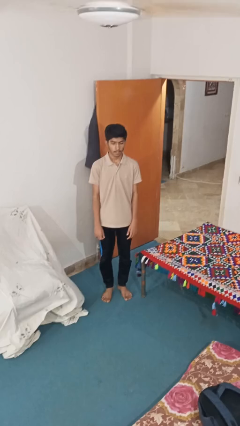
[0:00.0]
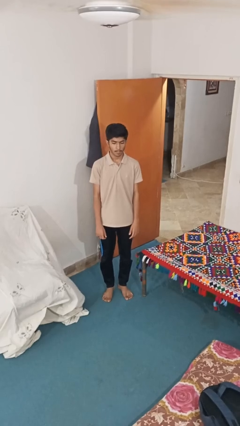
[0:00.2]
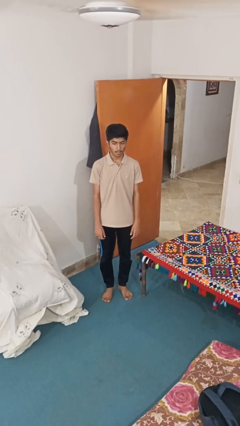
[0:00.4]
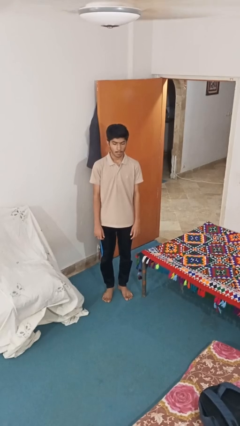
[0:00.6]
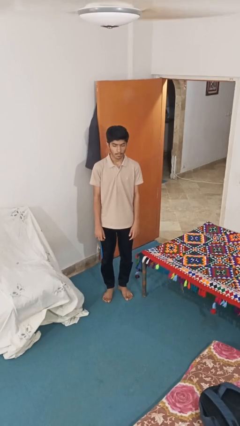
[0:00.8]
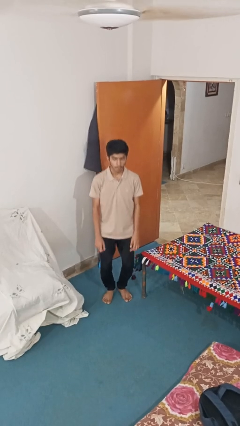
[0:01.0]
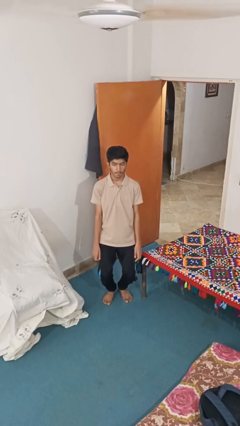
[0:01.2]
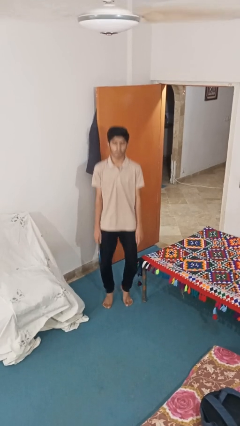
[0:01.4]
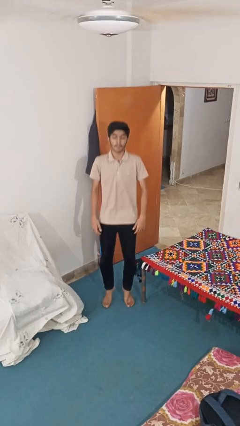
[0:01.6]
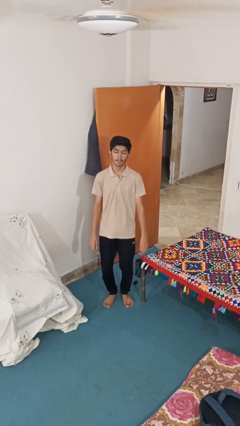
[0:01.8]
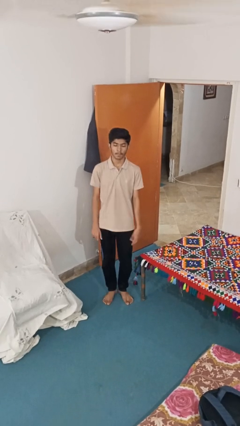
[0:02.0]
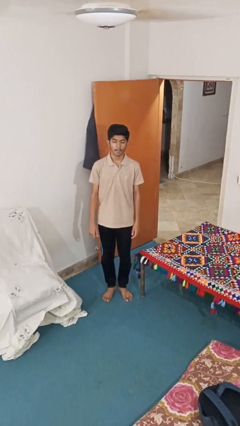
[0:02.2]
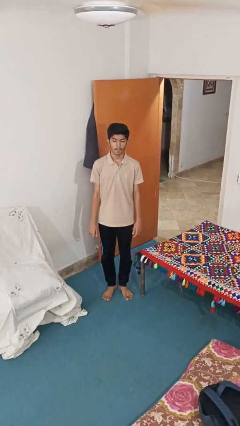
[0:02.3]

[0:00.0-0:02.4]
person jumps

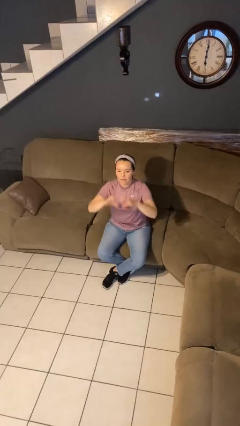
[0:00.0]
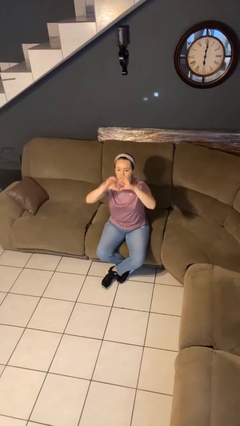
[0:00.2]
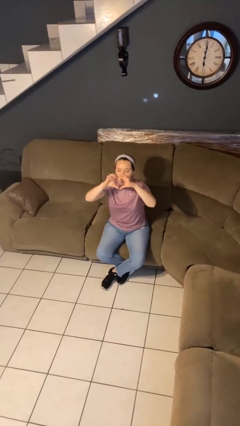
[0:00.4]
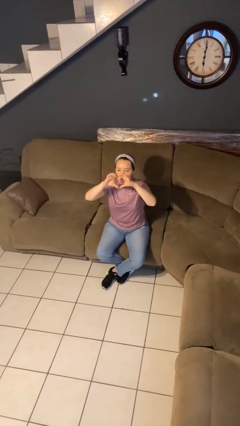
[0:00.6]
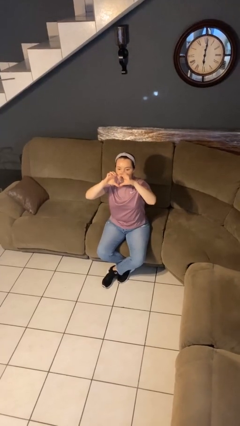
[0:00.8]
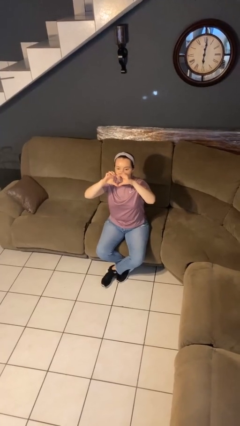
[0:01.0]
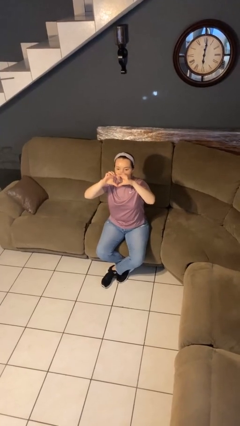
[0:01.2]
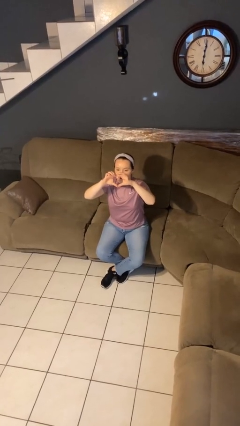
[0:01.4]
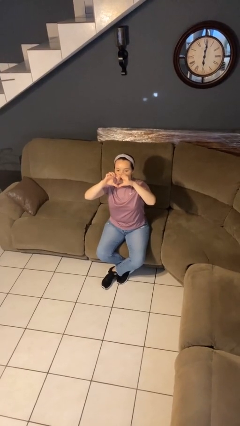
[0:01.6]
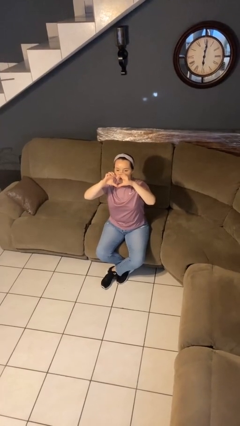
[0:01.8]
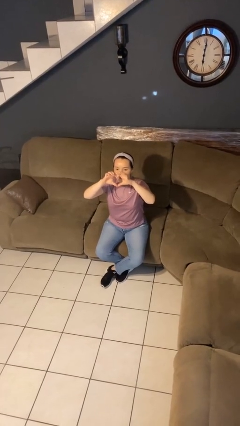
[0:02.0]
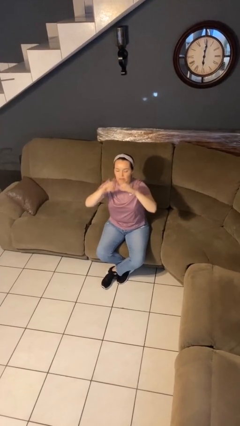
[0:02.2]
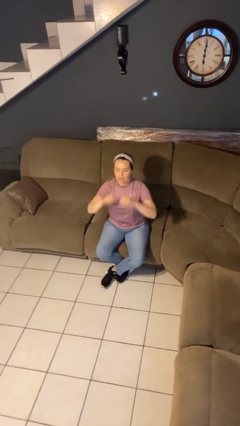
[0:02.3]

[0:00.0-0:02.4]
person gestures heart

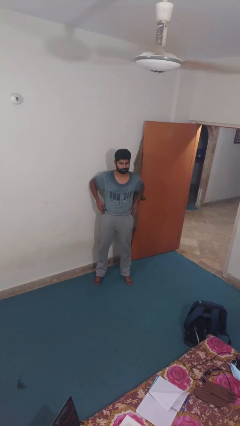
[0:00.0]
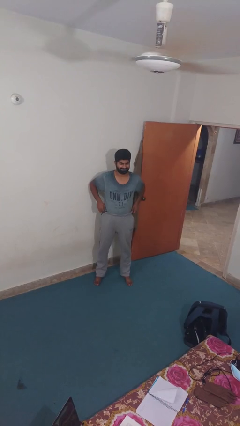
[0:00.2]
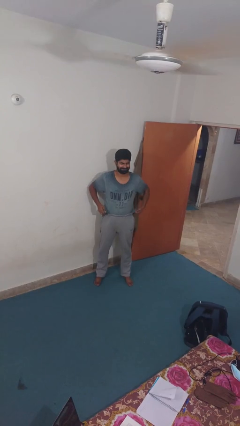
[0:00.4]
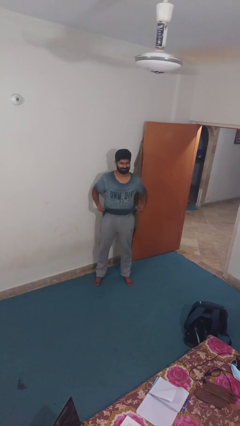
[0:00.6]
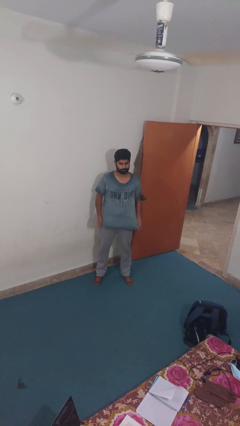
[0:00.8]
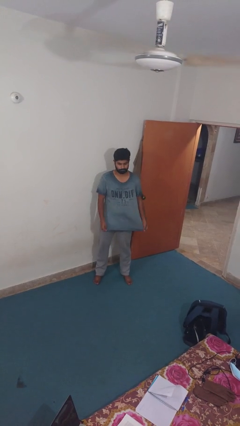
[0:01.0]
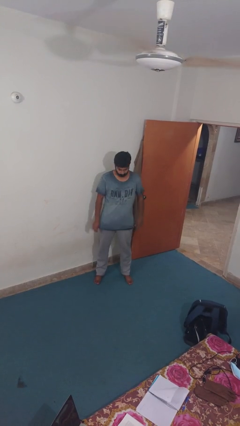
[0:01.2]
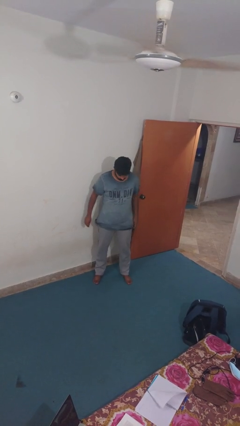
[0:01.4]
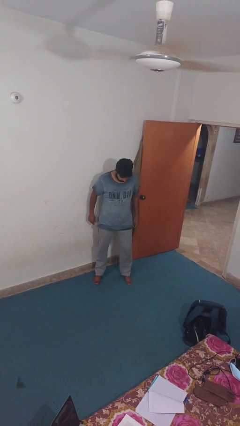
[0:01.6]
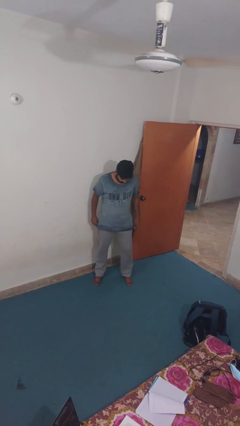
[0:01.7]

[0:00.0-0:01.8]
person untucks shirt

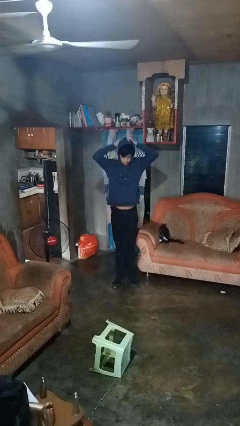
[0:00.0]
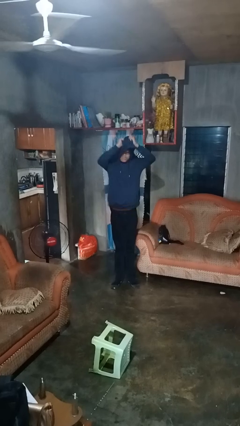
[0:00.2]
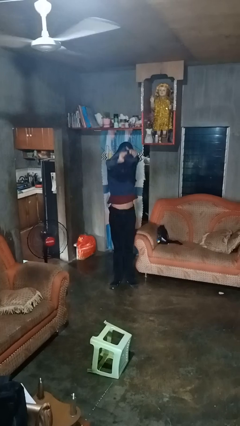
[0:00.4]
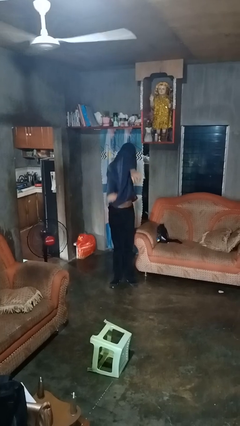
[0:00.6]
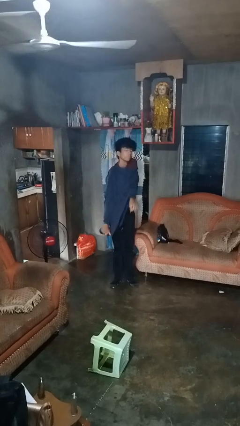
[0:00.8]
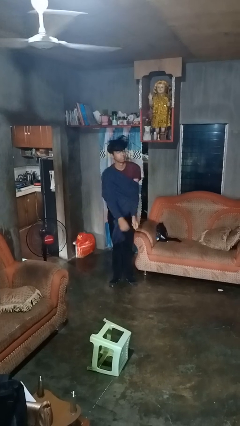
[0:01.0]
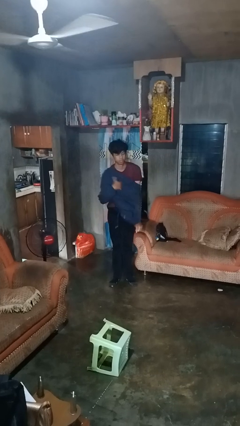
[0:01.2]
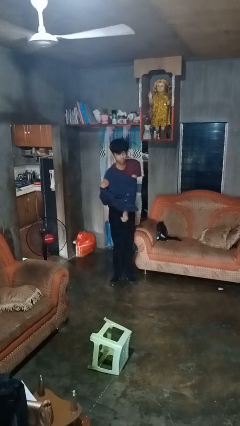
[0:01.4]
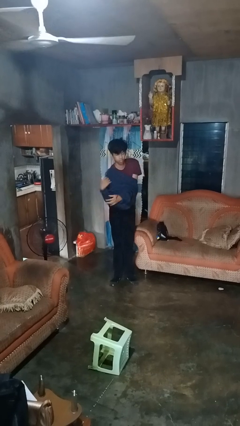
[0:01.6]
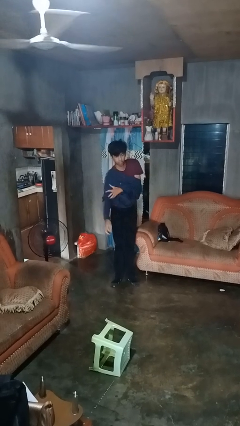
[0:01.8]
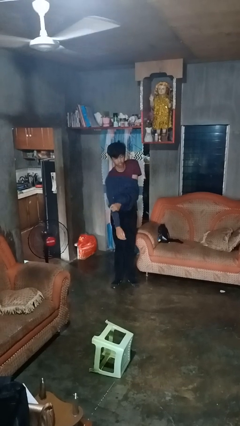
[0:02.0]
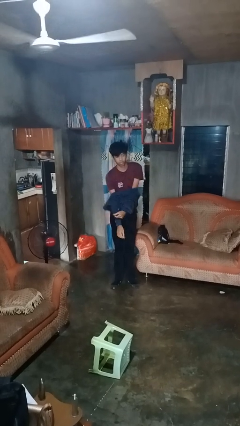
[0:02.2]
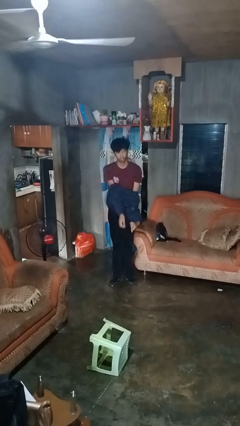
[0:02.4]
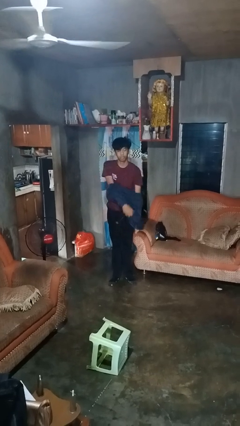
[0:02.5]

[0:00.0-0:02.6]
person takes off hoodie

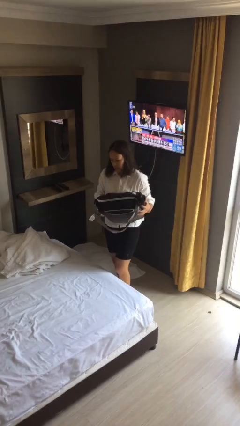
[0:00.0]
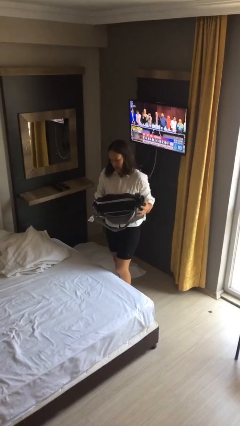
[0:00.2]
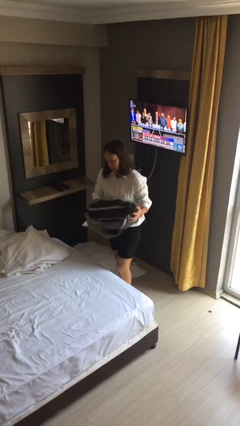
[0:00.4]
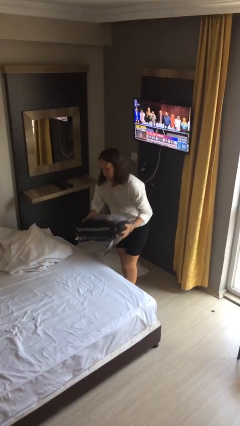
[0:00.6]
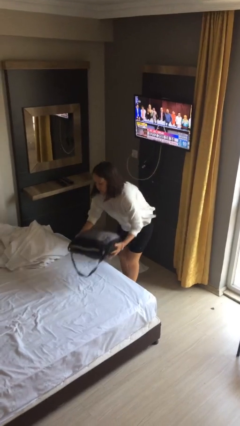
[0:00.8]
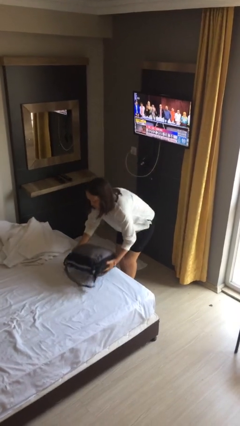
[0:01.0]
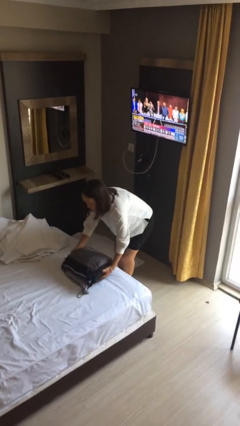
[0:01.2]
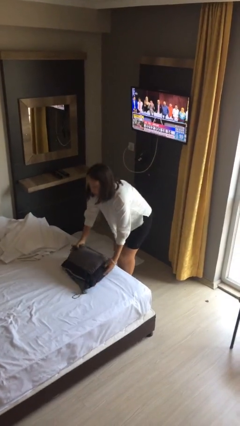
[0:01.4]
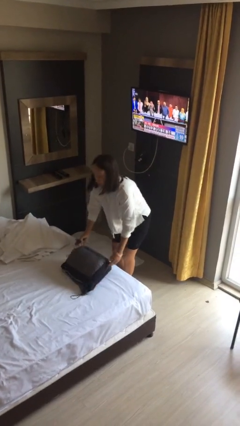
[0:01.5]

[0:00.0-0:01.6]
person puts down object on bed

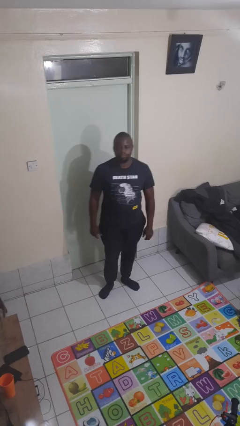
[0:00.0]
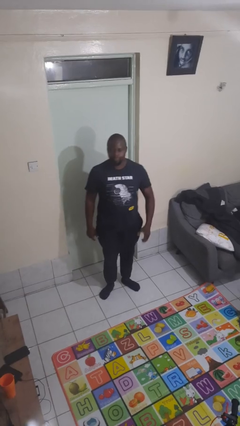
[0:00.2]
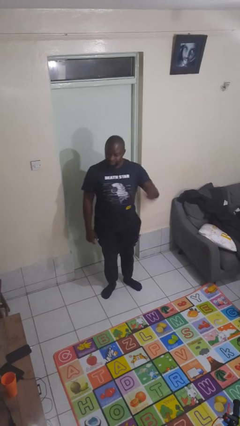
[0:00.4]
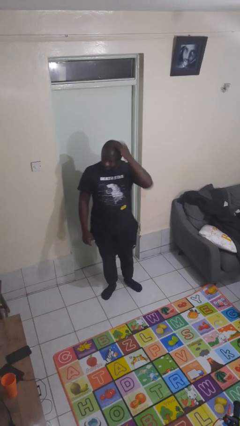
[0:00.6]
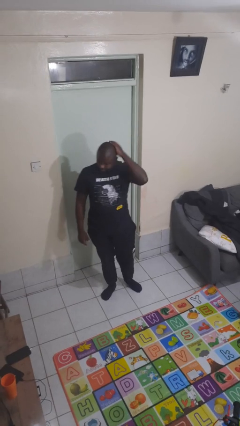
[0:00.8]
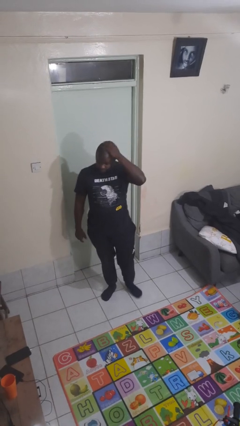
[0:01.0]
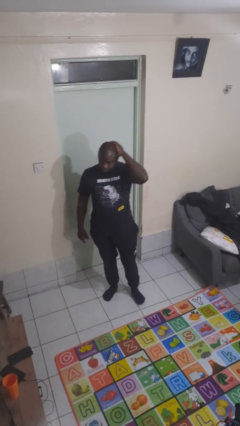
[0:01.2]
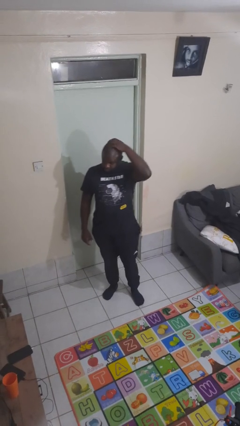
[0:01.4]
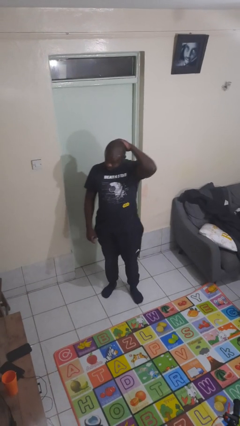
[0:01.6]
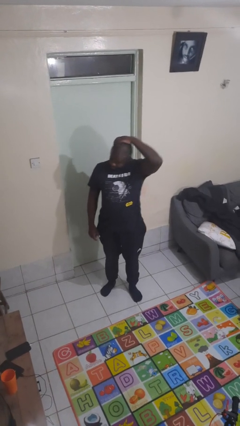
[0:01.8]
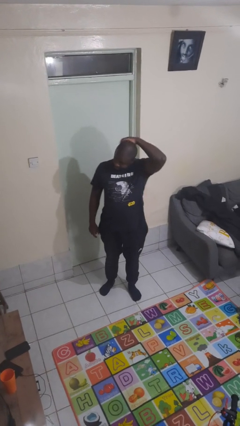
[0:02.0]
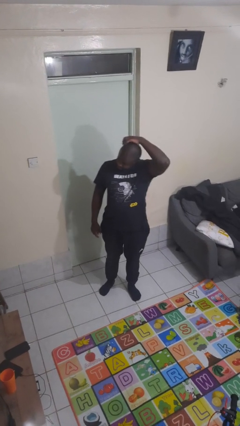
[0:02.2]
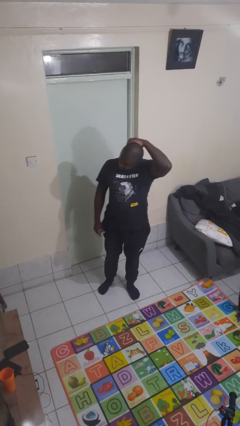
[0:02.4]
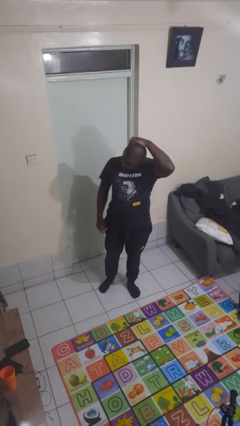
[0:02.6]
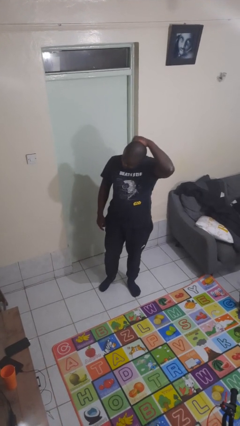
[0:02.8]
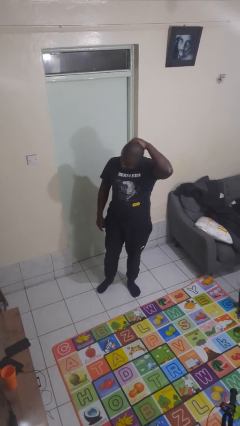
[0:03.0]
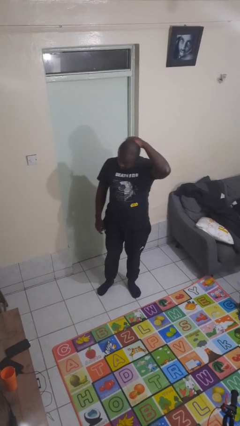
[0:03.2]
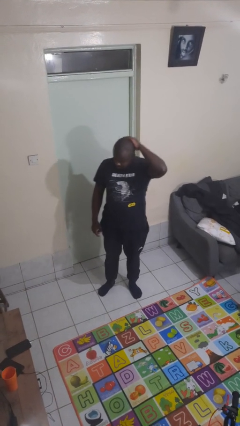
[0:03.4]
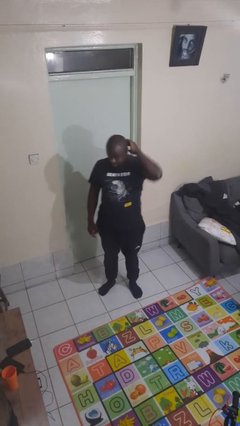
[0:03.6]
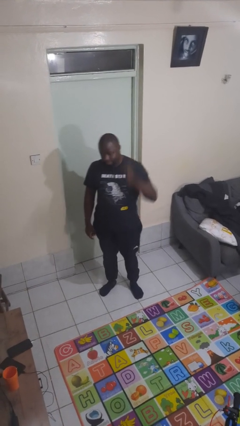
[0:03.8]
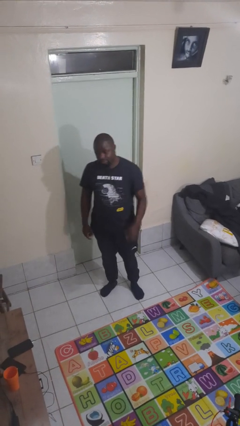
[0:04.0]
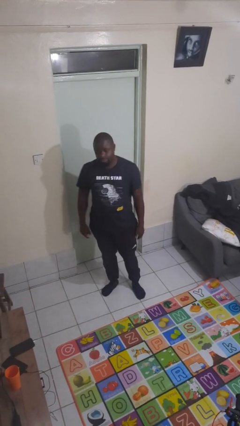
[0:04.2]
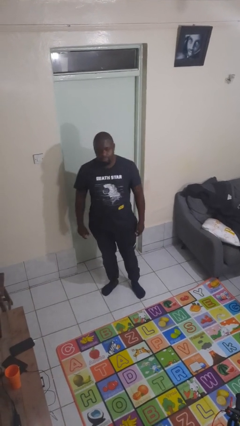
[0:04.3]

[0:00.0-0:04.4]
person scratches face

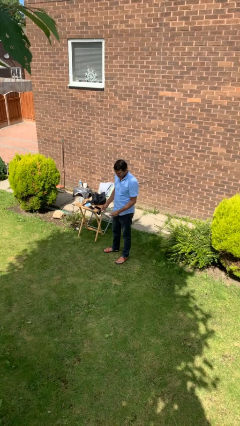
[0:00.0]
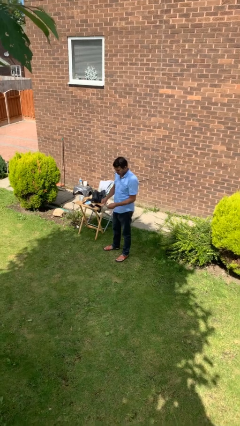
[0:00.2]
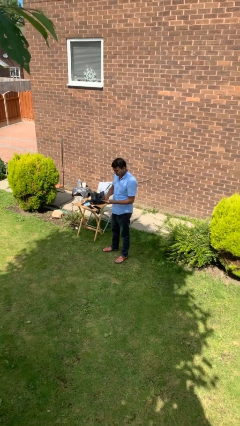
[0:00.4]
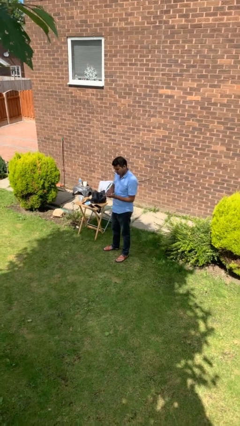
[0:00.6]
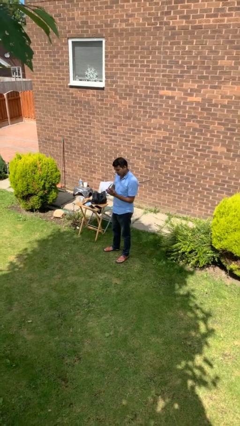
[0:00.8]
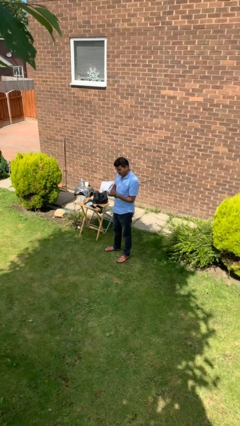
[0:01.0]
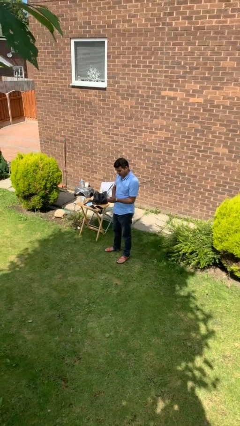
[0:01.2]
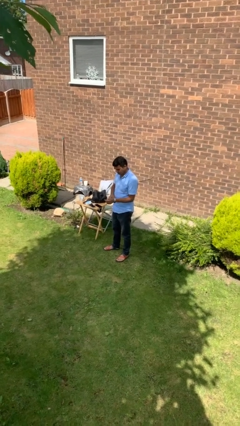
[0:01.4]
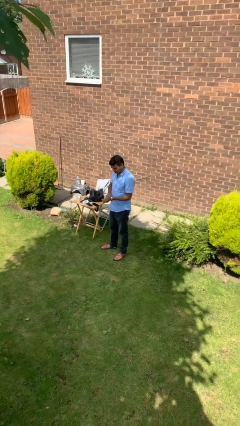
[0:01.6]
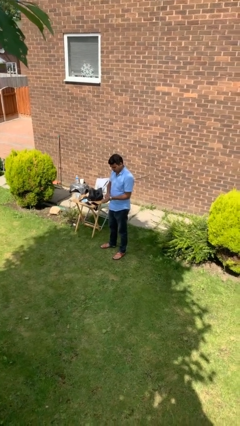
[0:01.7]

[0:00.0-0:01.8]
person puts on wristwatch
